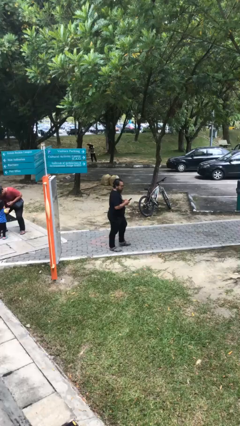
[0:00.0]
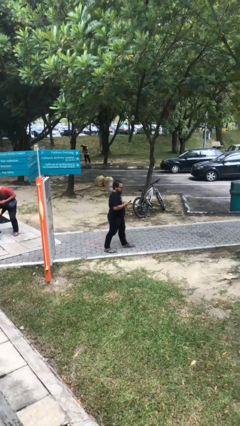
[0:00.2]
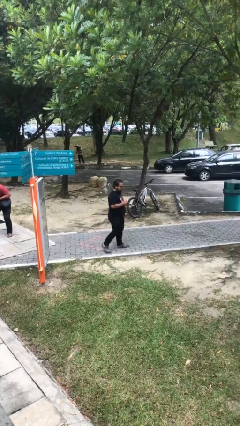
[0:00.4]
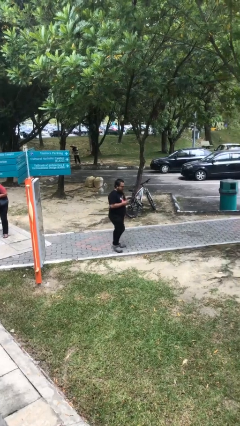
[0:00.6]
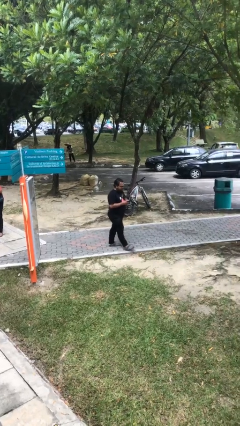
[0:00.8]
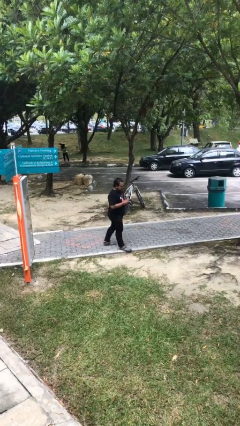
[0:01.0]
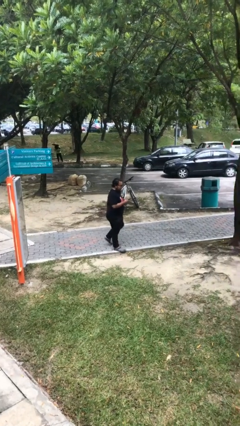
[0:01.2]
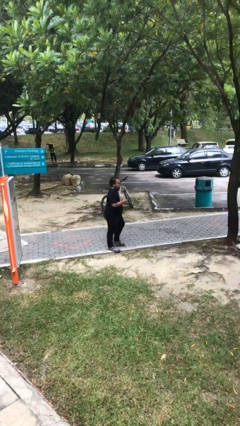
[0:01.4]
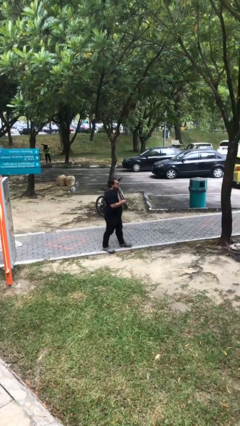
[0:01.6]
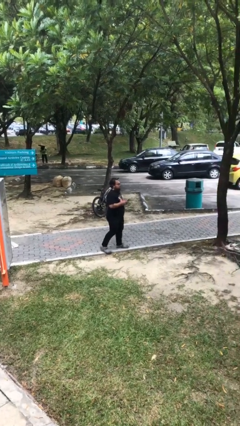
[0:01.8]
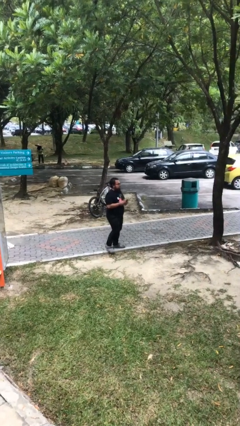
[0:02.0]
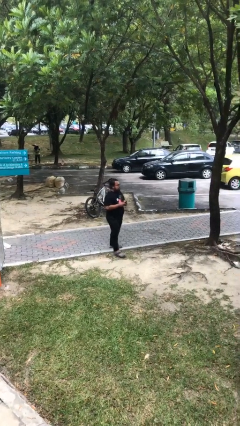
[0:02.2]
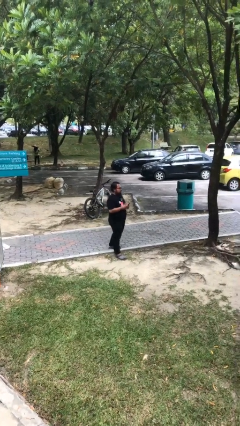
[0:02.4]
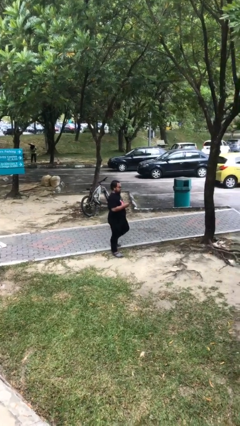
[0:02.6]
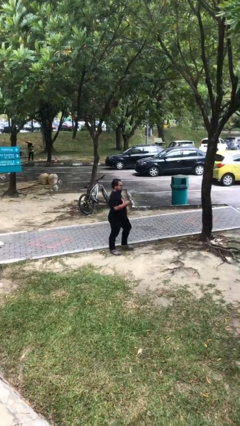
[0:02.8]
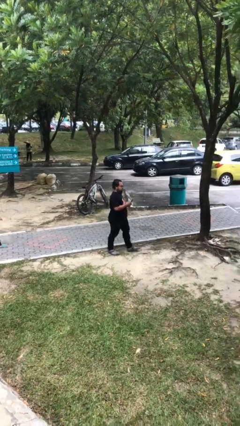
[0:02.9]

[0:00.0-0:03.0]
person texts on phone

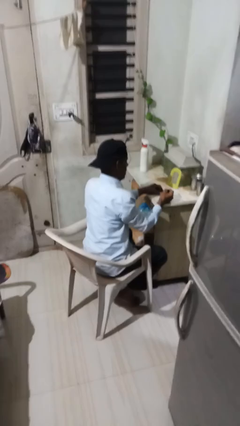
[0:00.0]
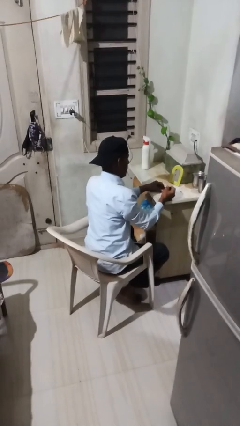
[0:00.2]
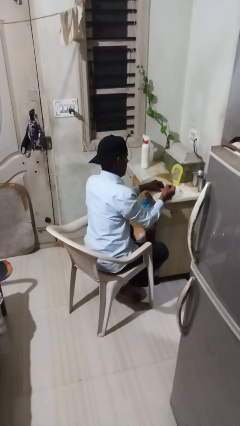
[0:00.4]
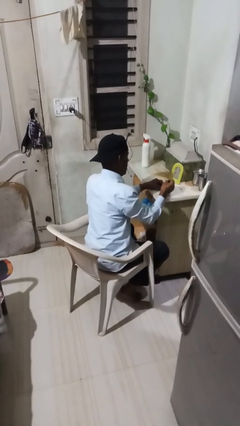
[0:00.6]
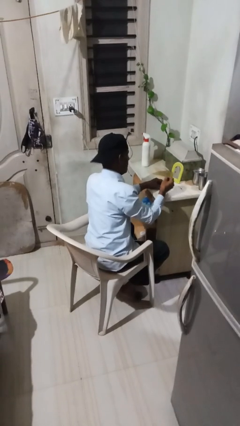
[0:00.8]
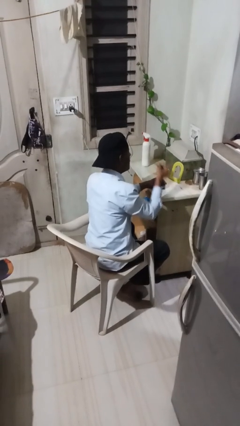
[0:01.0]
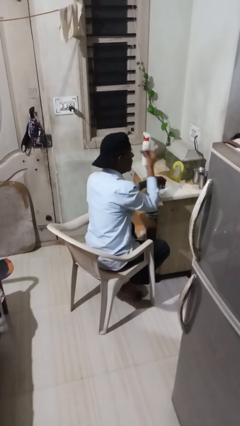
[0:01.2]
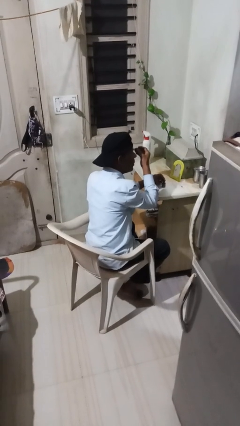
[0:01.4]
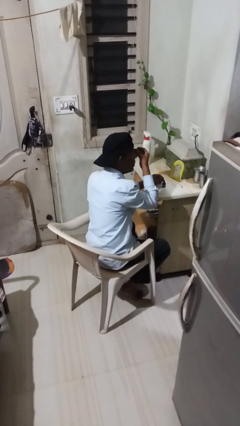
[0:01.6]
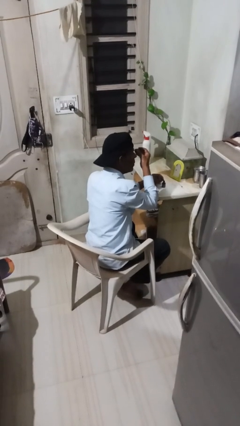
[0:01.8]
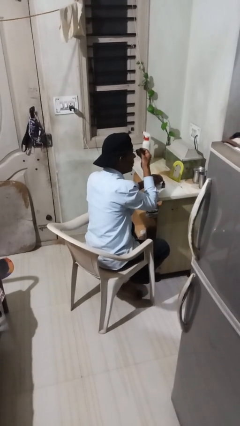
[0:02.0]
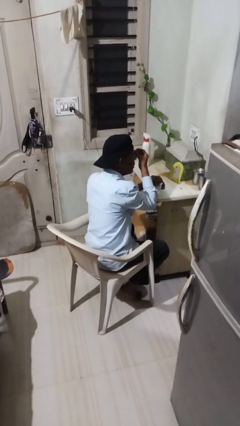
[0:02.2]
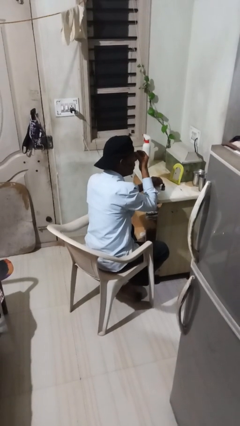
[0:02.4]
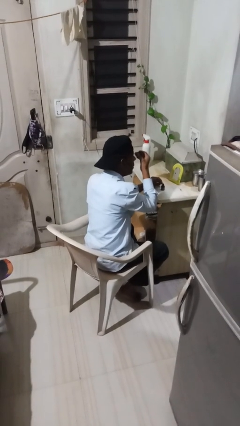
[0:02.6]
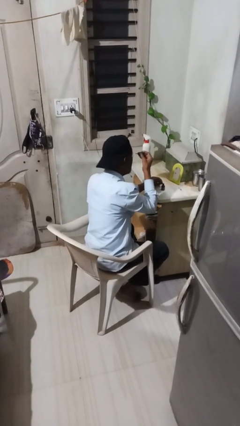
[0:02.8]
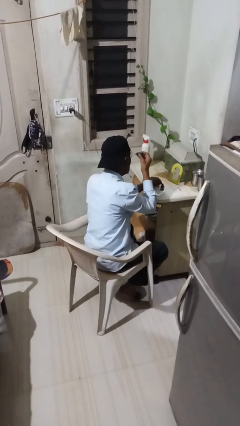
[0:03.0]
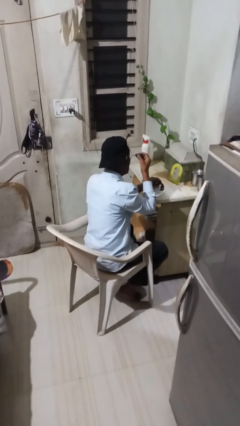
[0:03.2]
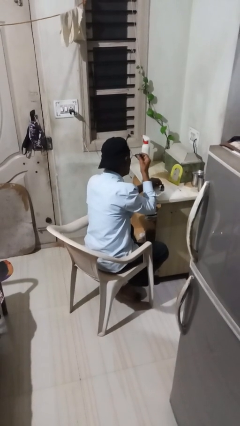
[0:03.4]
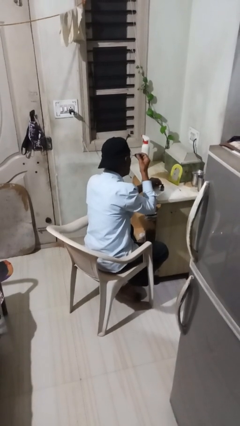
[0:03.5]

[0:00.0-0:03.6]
person applies eye makeup

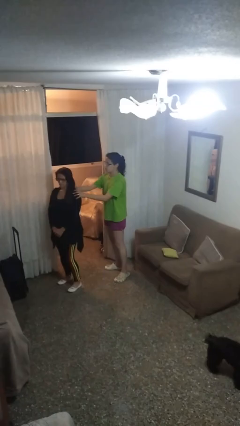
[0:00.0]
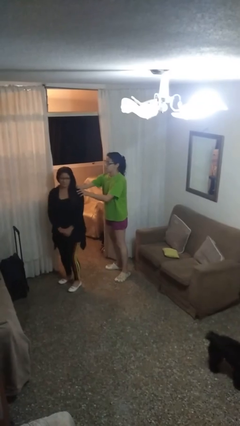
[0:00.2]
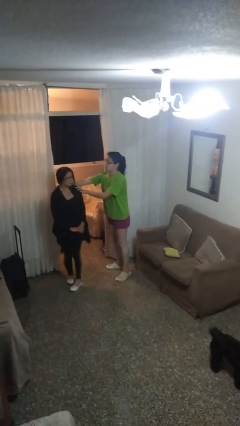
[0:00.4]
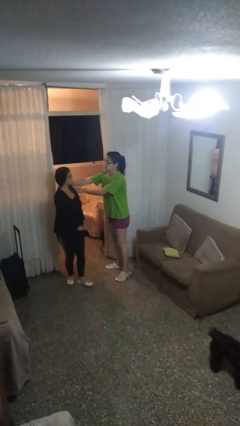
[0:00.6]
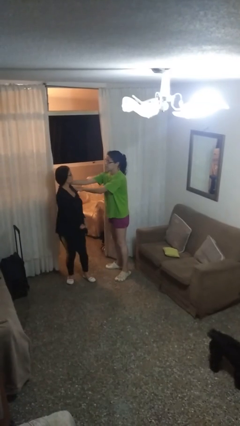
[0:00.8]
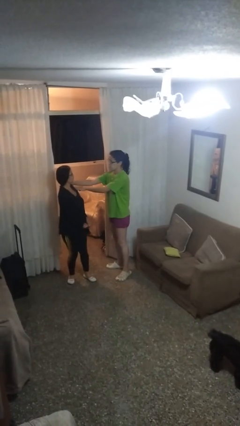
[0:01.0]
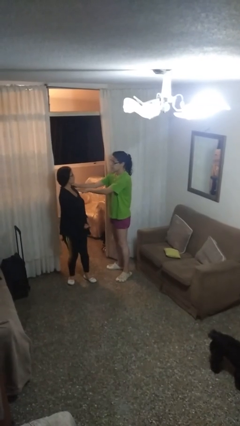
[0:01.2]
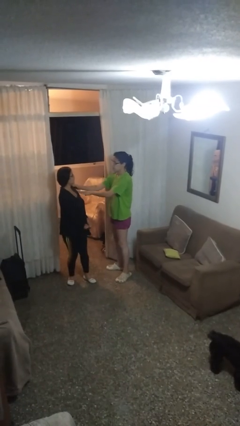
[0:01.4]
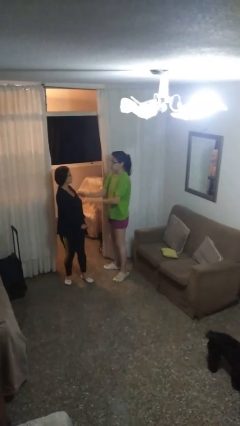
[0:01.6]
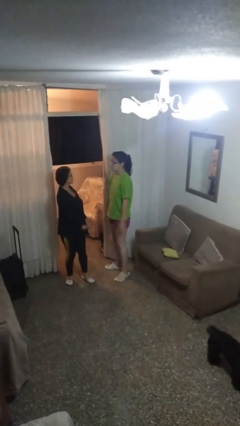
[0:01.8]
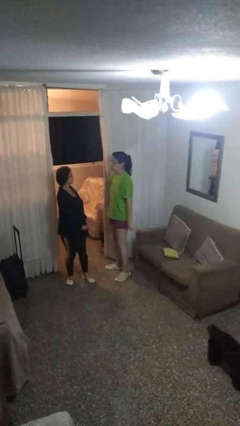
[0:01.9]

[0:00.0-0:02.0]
person spins person around

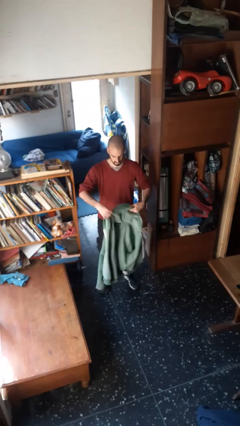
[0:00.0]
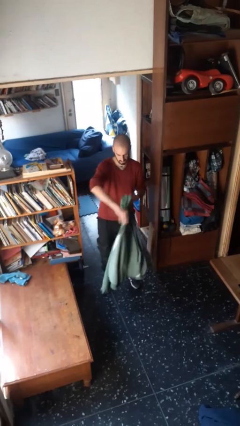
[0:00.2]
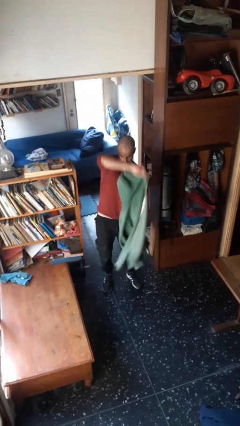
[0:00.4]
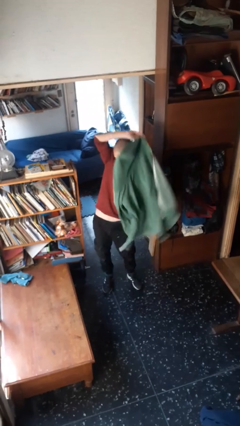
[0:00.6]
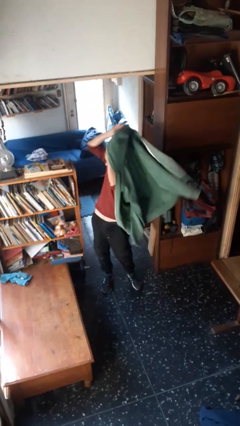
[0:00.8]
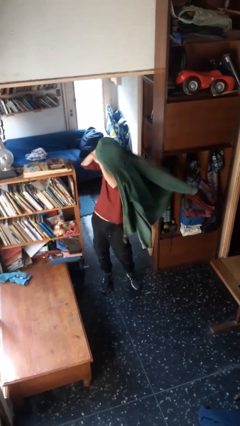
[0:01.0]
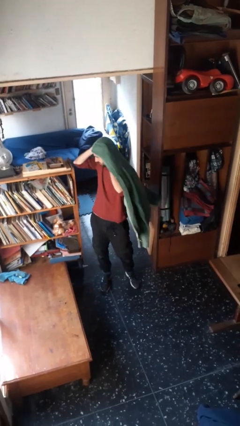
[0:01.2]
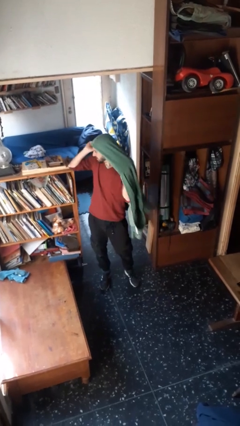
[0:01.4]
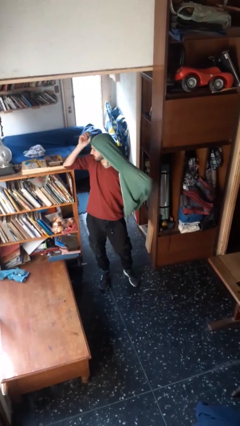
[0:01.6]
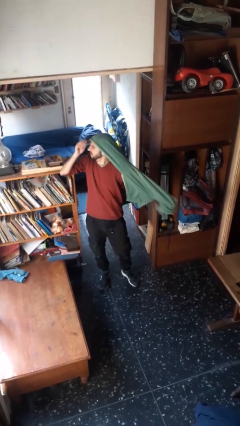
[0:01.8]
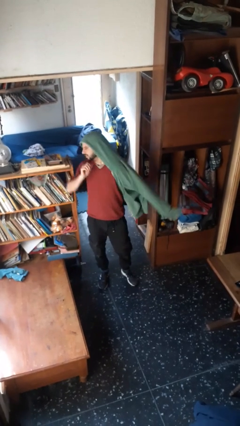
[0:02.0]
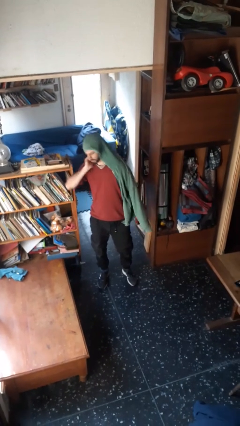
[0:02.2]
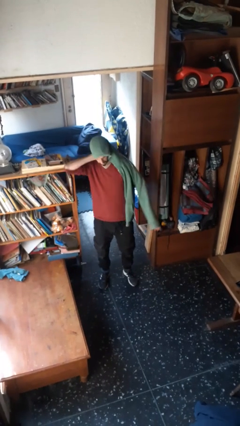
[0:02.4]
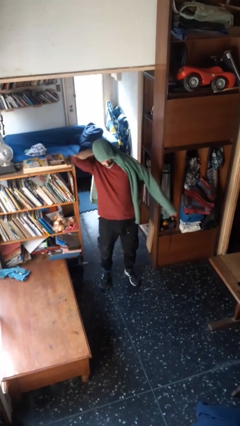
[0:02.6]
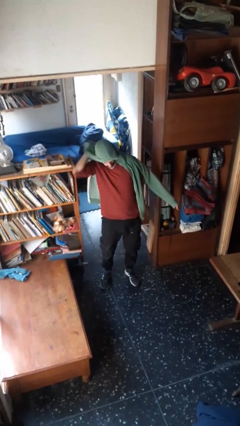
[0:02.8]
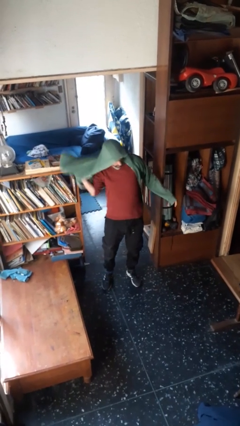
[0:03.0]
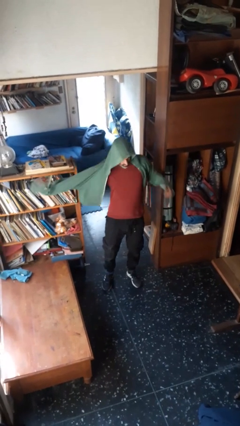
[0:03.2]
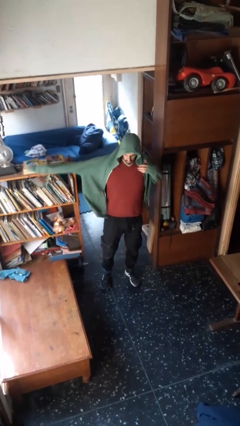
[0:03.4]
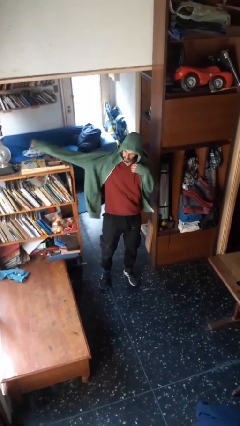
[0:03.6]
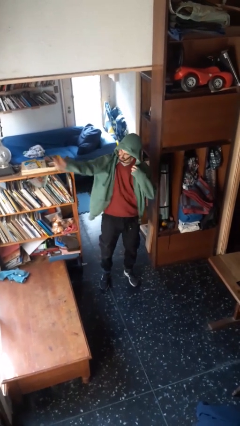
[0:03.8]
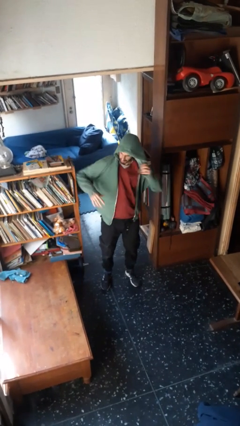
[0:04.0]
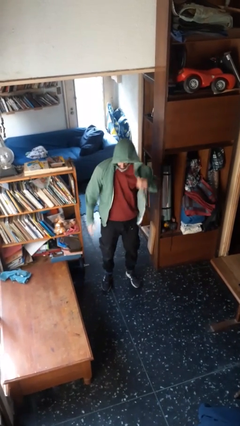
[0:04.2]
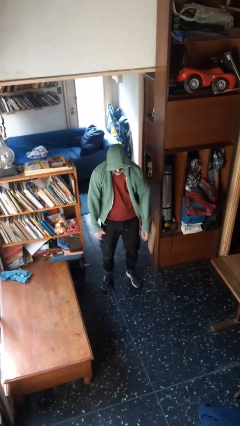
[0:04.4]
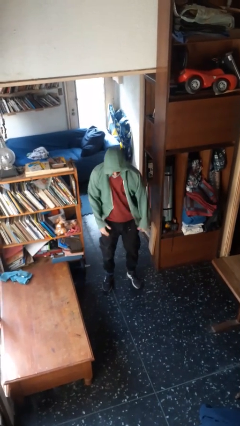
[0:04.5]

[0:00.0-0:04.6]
person puts on hoodie

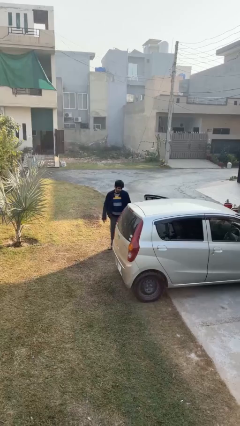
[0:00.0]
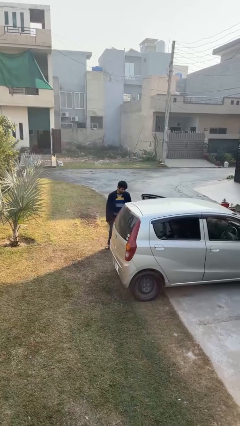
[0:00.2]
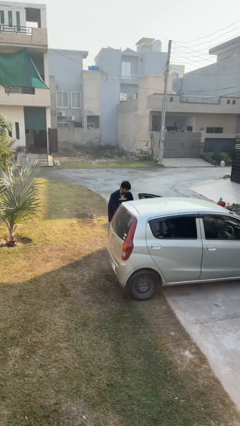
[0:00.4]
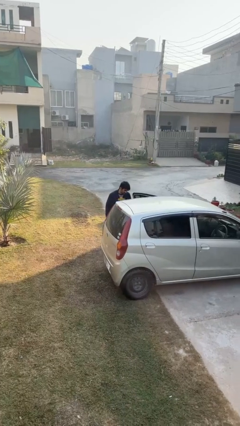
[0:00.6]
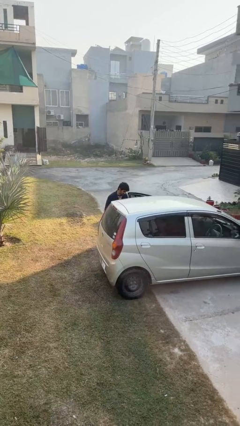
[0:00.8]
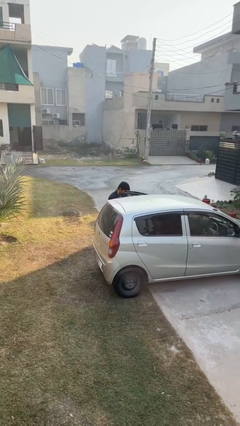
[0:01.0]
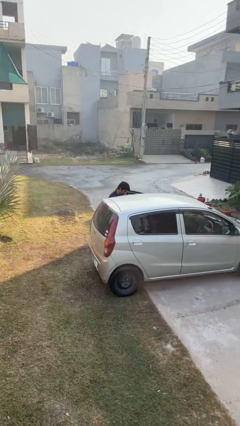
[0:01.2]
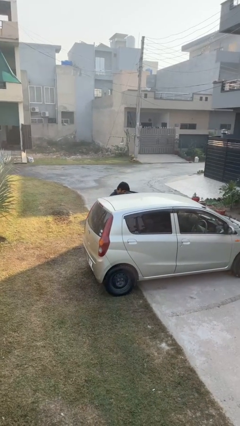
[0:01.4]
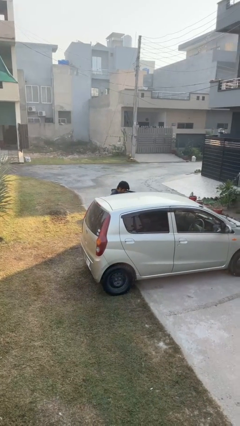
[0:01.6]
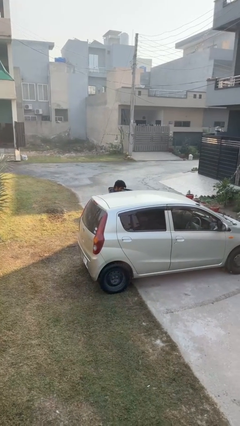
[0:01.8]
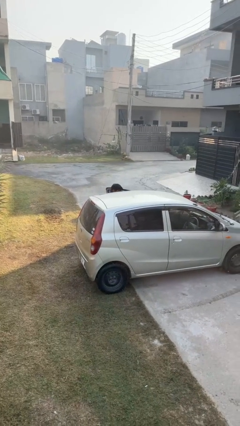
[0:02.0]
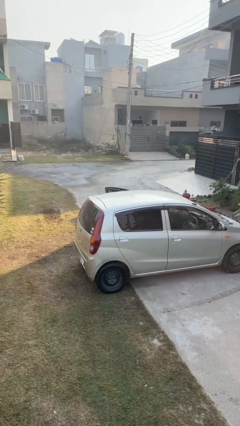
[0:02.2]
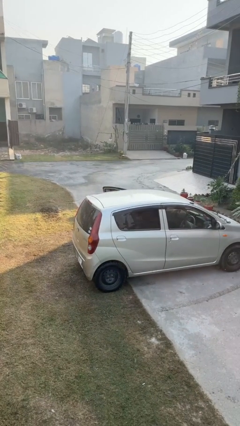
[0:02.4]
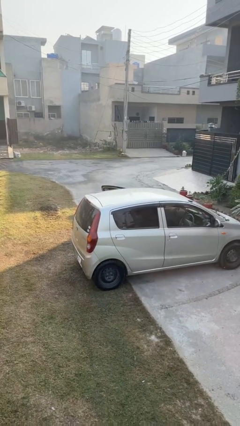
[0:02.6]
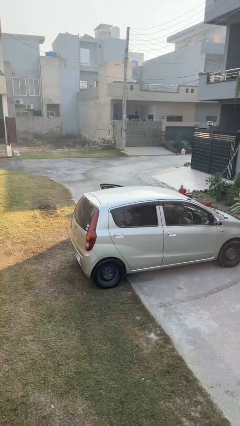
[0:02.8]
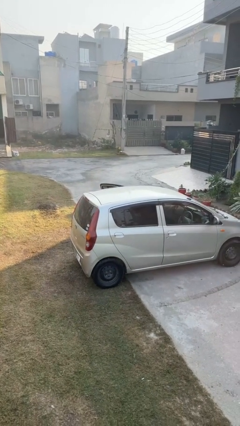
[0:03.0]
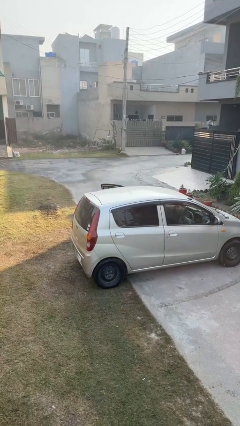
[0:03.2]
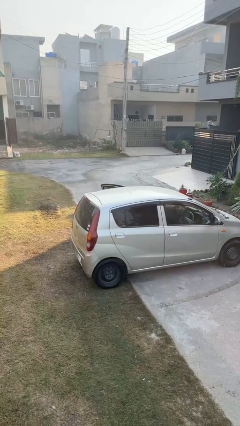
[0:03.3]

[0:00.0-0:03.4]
person enters car

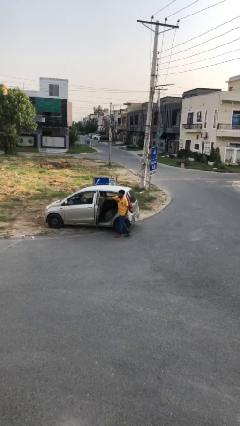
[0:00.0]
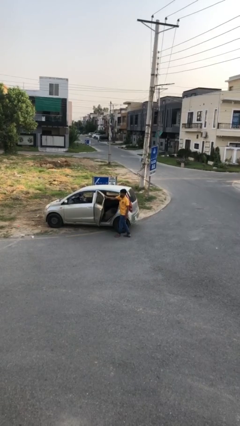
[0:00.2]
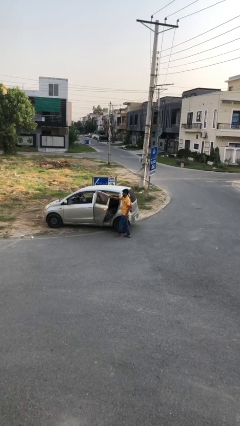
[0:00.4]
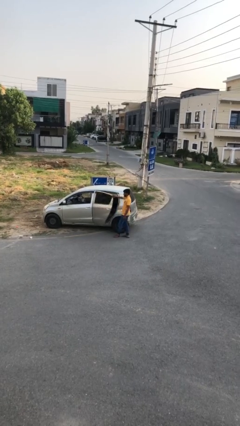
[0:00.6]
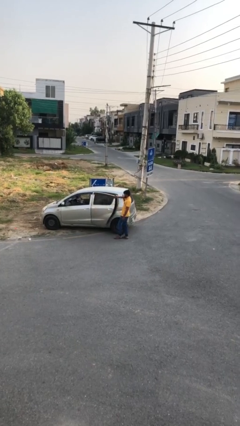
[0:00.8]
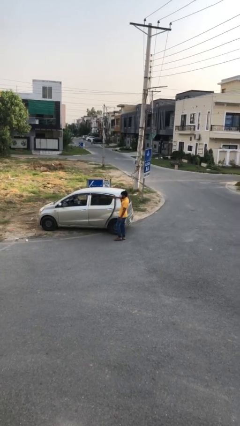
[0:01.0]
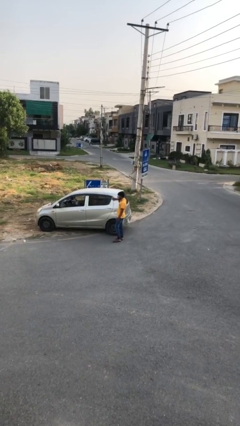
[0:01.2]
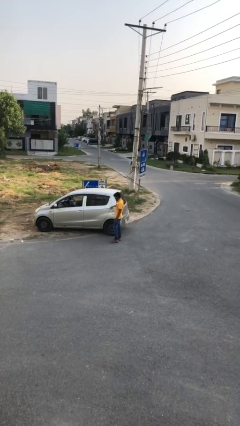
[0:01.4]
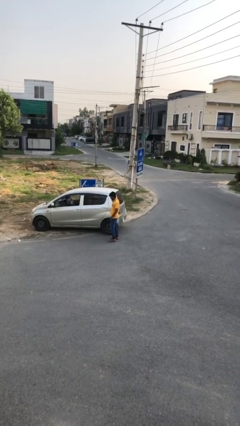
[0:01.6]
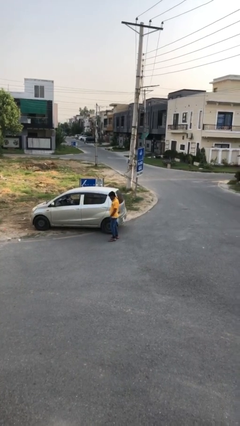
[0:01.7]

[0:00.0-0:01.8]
person closes car door
